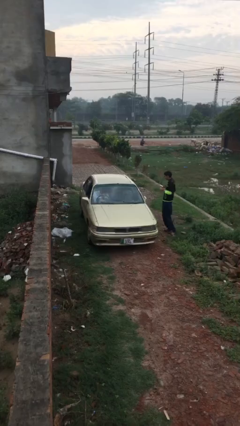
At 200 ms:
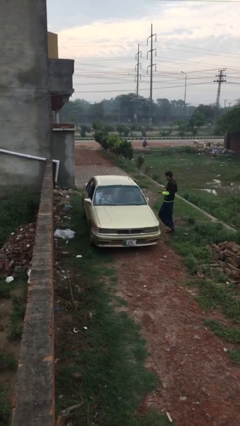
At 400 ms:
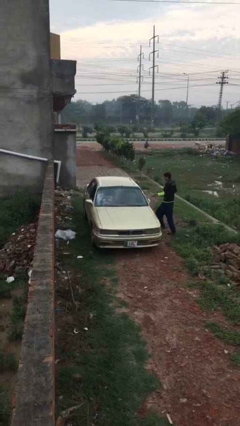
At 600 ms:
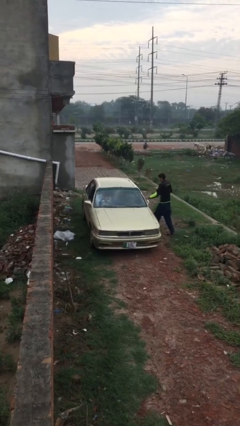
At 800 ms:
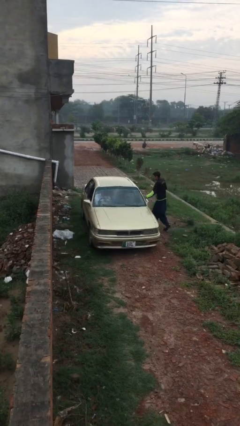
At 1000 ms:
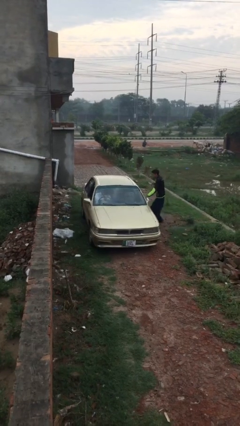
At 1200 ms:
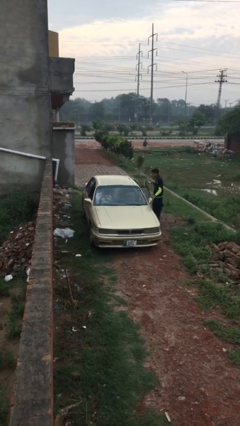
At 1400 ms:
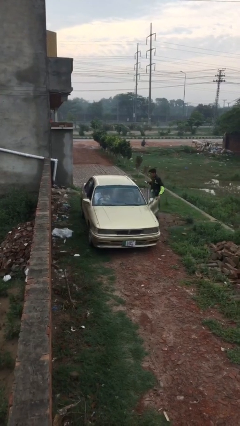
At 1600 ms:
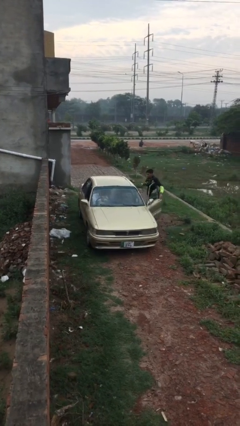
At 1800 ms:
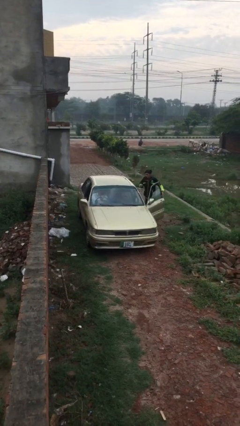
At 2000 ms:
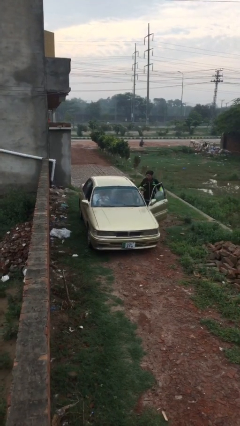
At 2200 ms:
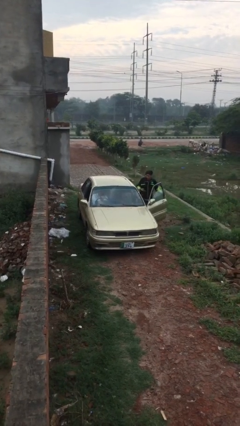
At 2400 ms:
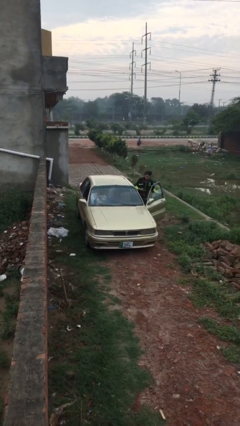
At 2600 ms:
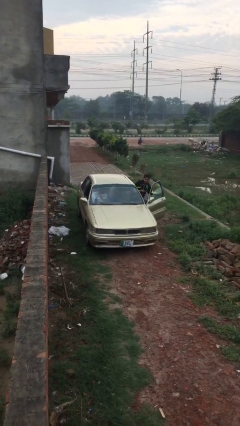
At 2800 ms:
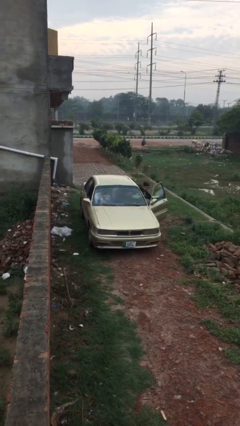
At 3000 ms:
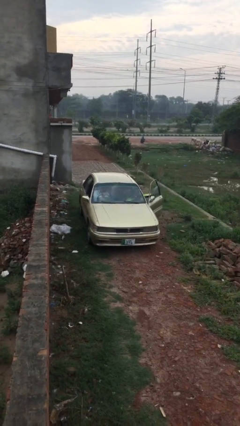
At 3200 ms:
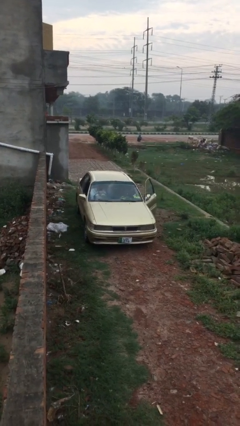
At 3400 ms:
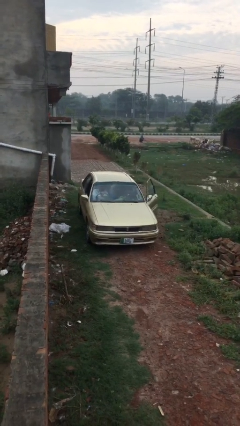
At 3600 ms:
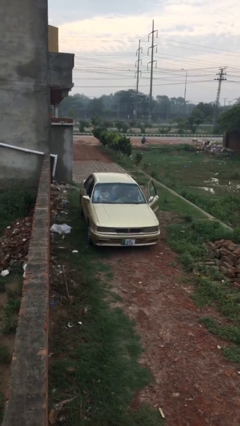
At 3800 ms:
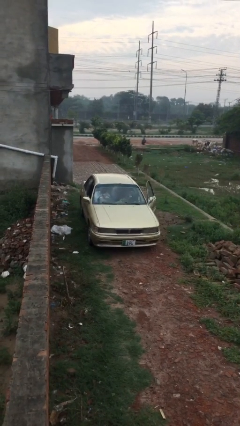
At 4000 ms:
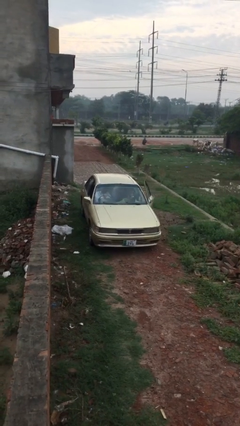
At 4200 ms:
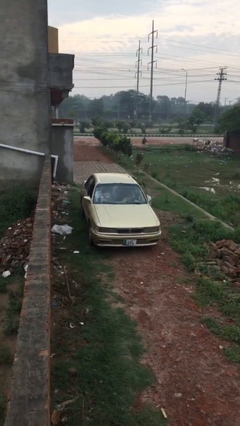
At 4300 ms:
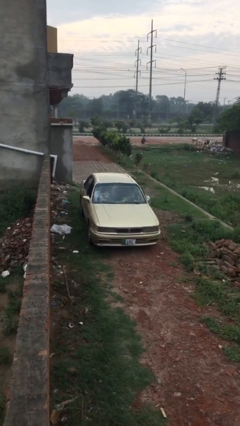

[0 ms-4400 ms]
car picks up person

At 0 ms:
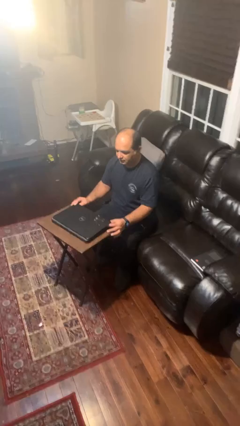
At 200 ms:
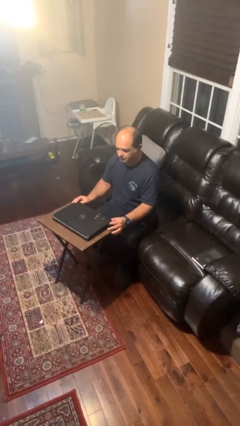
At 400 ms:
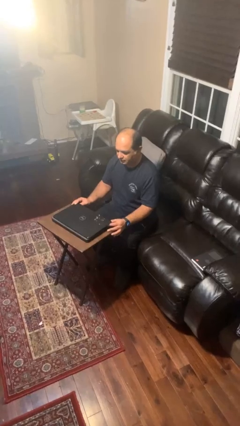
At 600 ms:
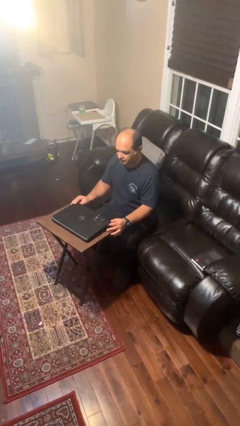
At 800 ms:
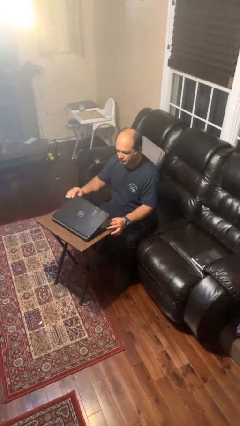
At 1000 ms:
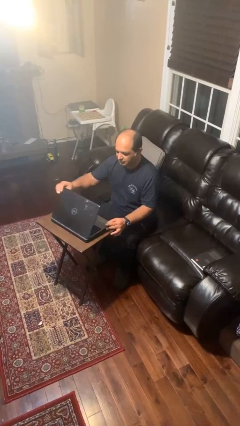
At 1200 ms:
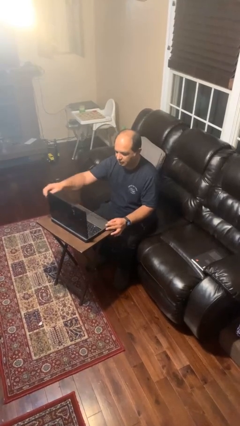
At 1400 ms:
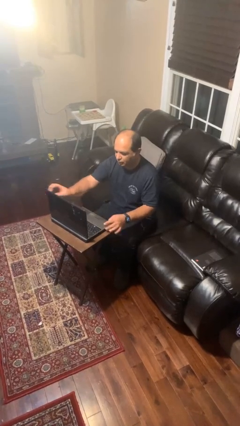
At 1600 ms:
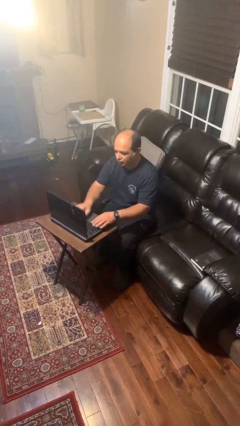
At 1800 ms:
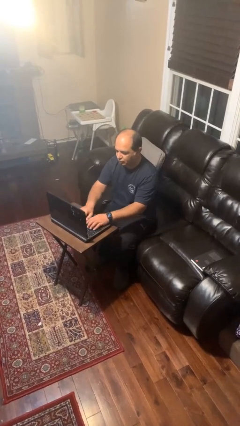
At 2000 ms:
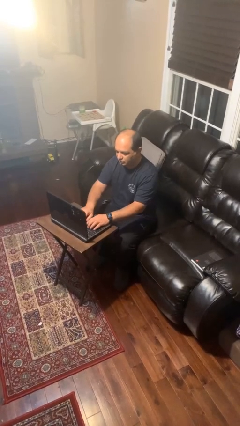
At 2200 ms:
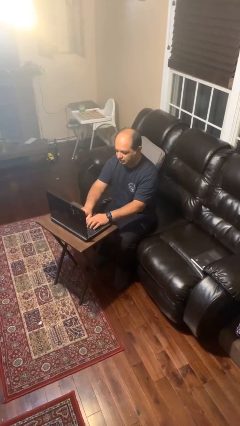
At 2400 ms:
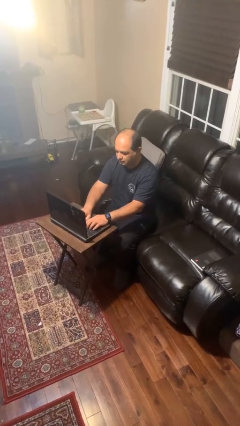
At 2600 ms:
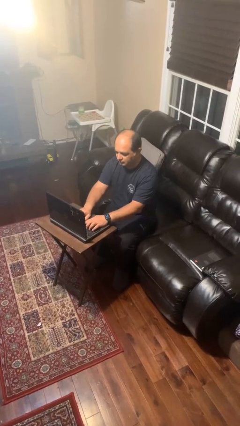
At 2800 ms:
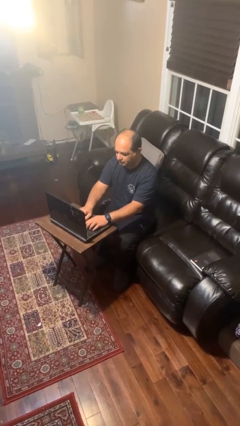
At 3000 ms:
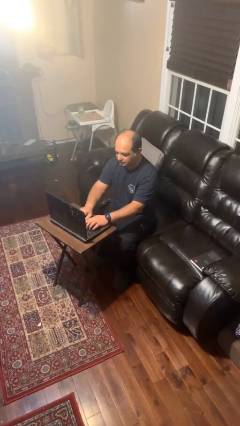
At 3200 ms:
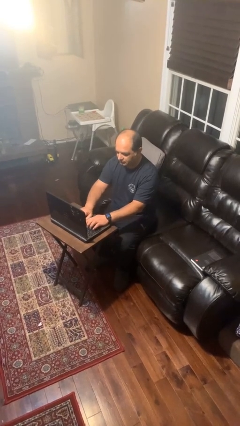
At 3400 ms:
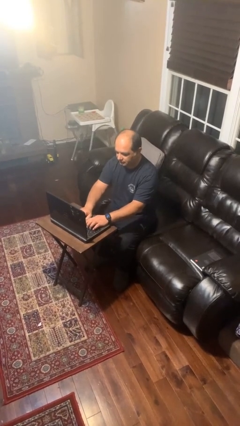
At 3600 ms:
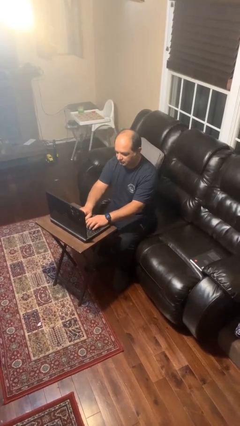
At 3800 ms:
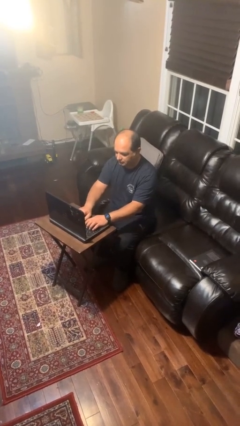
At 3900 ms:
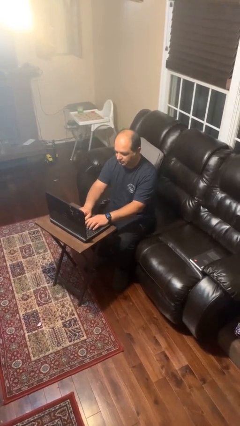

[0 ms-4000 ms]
person interacts with laptop

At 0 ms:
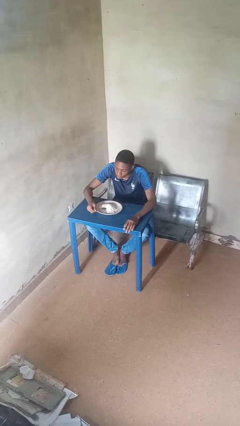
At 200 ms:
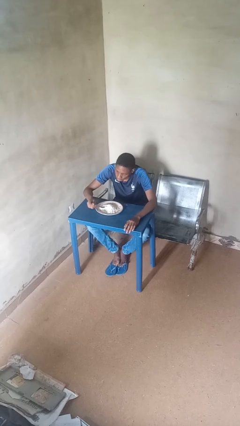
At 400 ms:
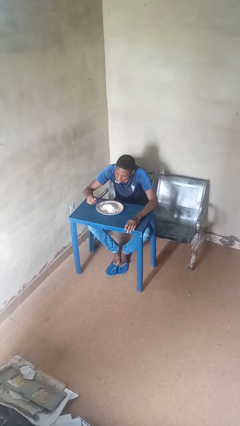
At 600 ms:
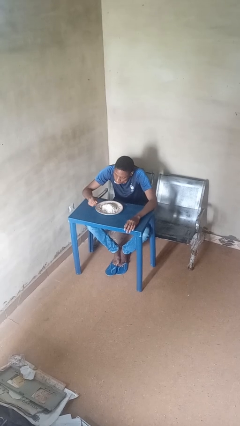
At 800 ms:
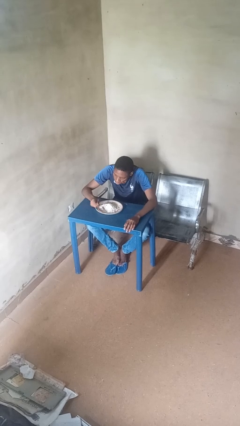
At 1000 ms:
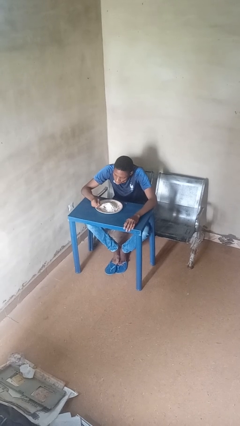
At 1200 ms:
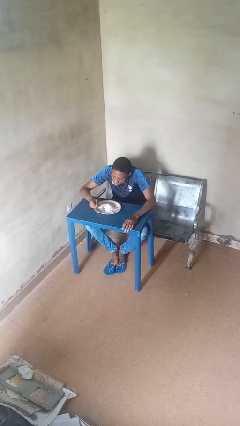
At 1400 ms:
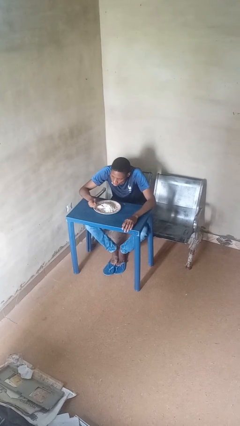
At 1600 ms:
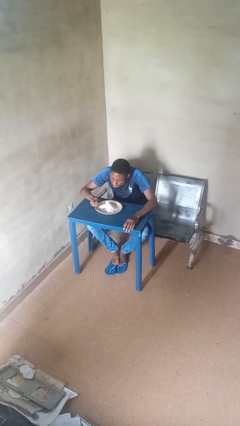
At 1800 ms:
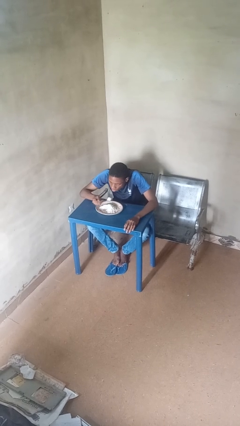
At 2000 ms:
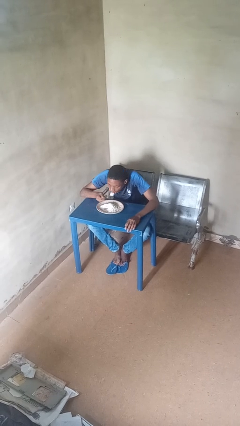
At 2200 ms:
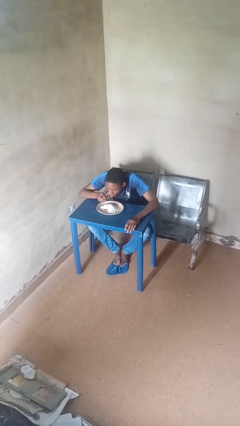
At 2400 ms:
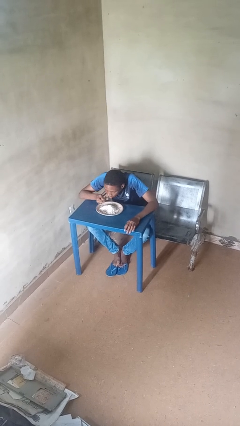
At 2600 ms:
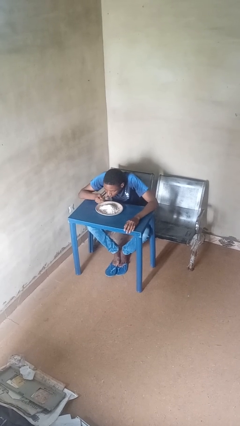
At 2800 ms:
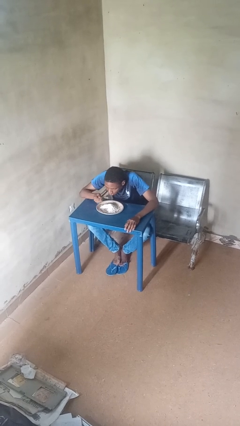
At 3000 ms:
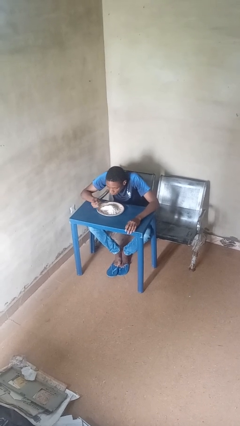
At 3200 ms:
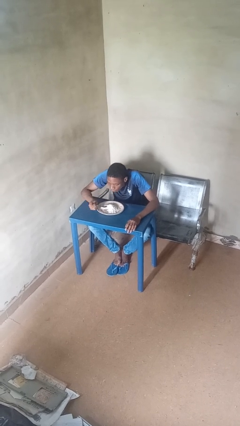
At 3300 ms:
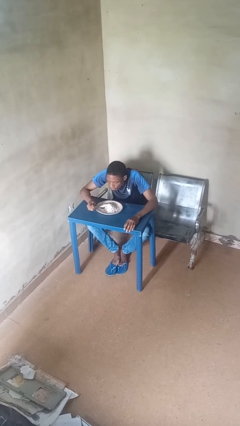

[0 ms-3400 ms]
person eats with utensil

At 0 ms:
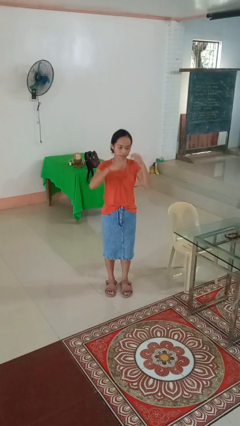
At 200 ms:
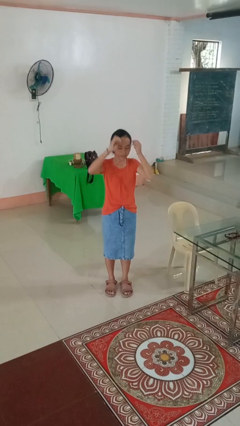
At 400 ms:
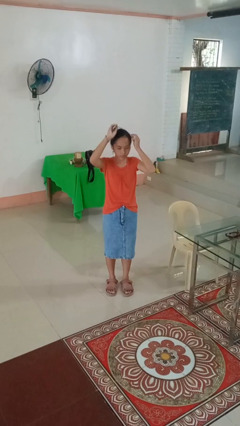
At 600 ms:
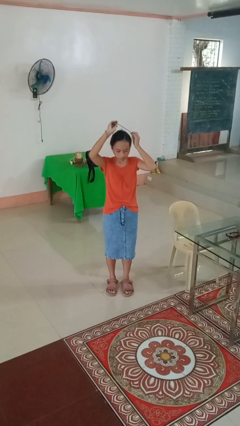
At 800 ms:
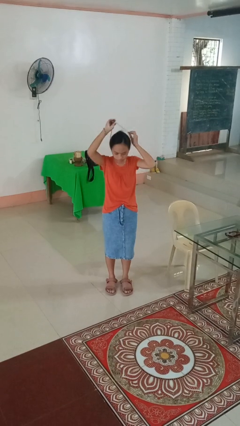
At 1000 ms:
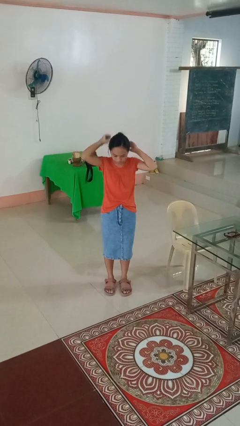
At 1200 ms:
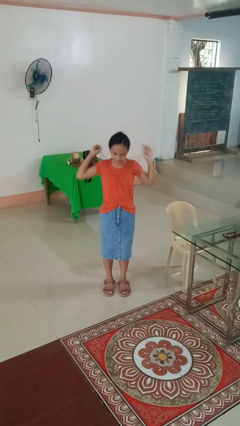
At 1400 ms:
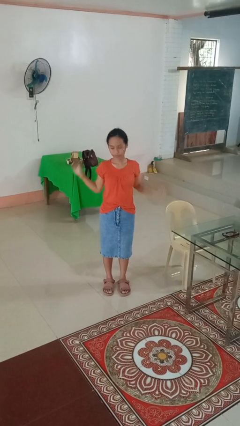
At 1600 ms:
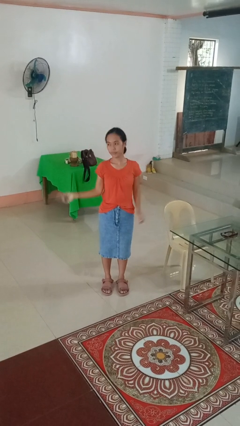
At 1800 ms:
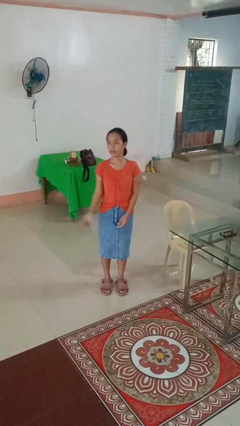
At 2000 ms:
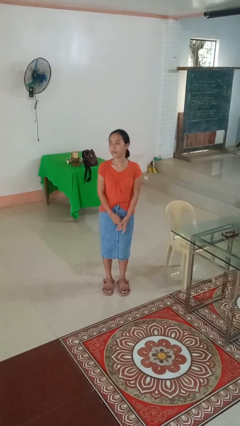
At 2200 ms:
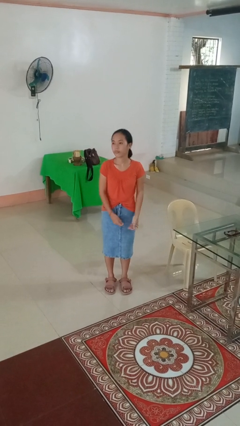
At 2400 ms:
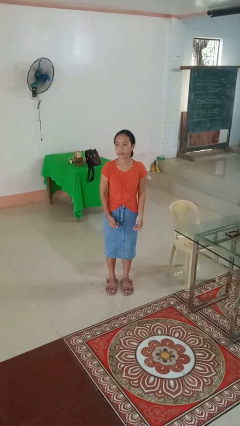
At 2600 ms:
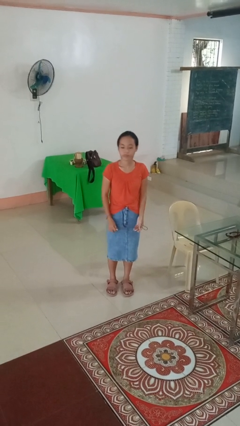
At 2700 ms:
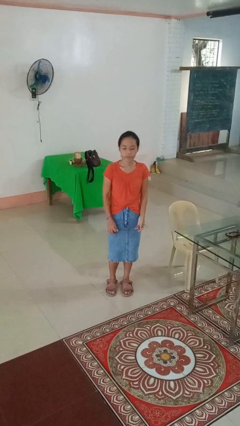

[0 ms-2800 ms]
person takes off necklace

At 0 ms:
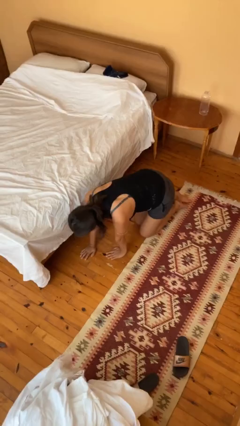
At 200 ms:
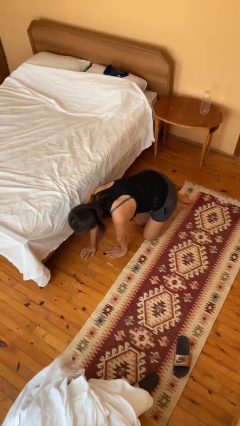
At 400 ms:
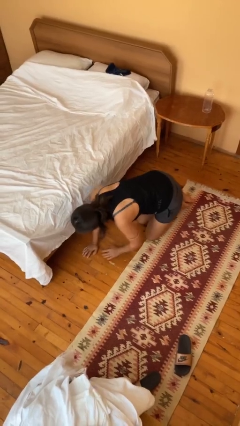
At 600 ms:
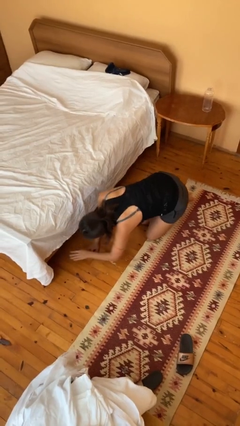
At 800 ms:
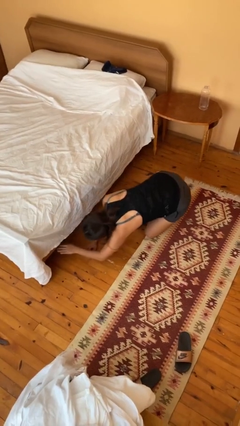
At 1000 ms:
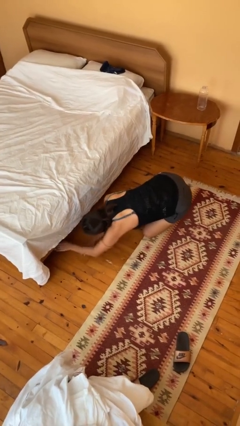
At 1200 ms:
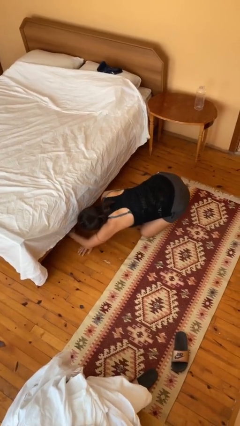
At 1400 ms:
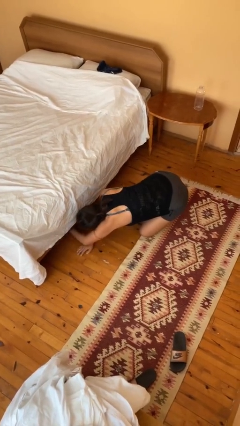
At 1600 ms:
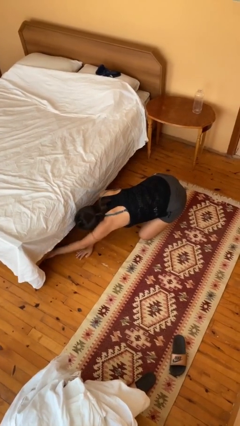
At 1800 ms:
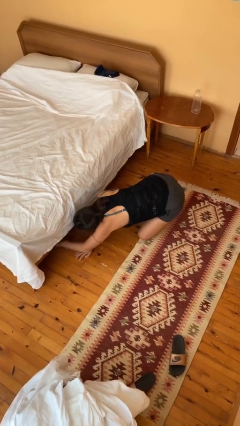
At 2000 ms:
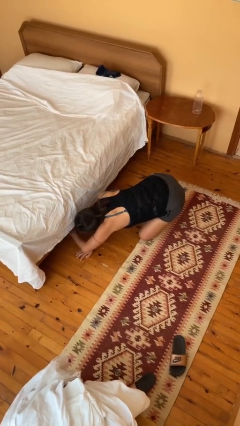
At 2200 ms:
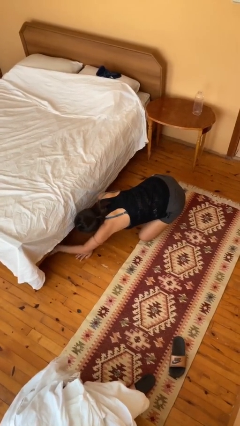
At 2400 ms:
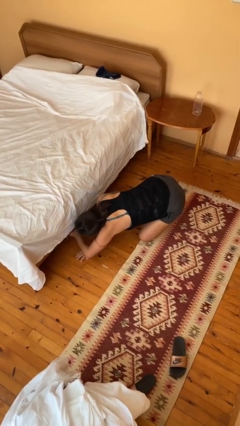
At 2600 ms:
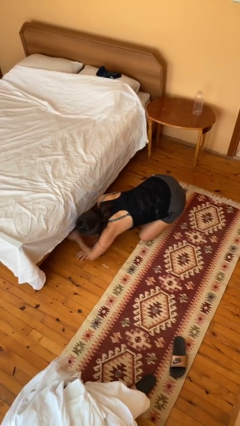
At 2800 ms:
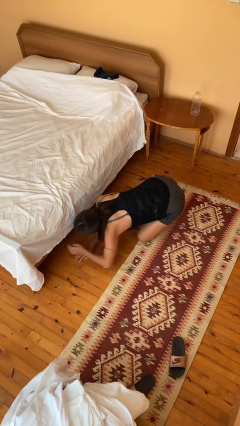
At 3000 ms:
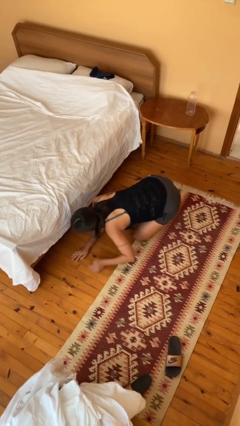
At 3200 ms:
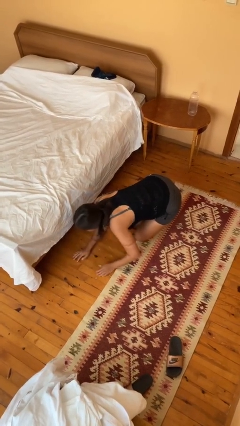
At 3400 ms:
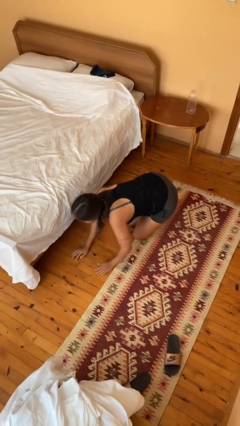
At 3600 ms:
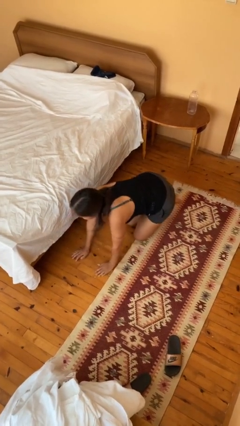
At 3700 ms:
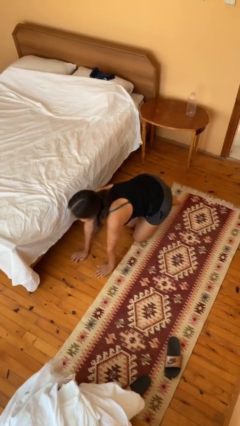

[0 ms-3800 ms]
person searches under bed
